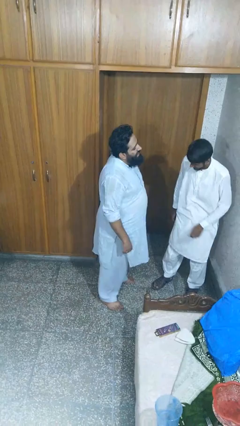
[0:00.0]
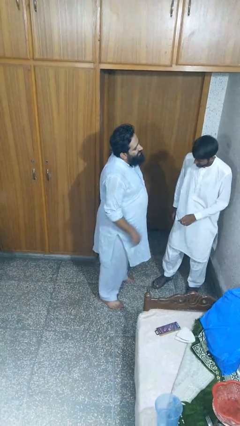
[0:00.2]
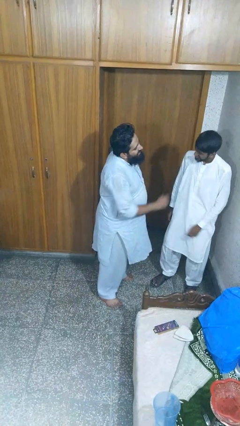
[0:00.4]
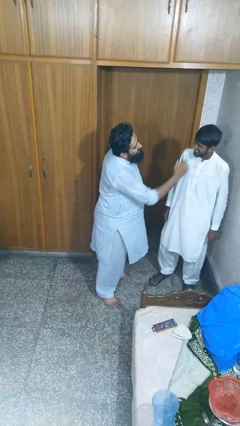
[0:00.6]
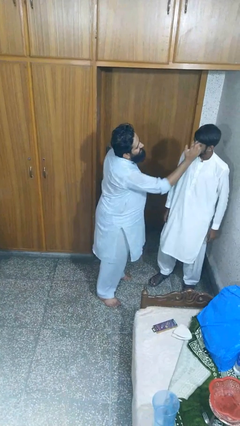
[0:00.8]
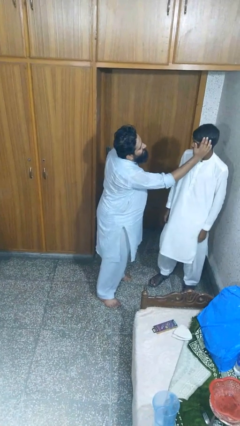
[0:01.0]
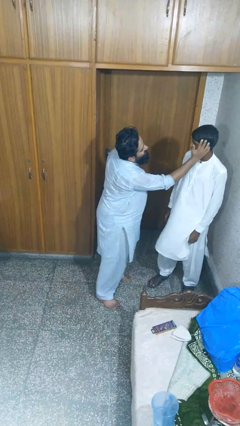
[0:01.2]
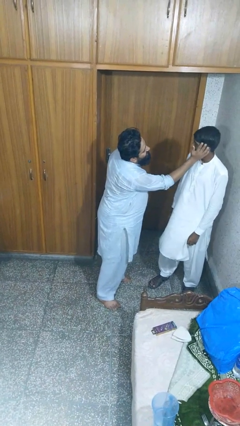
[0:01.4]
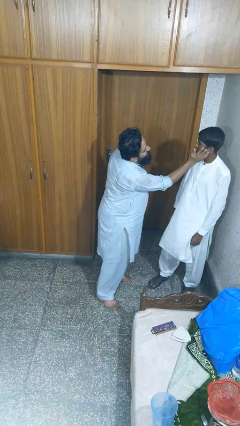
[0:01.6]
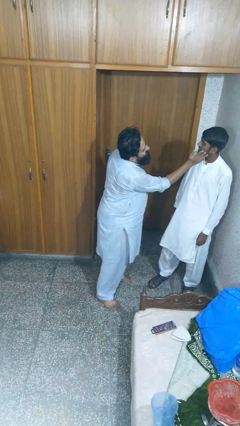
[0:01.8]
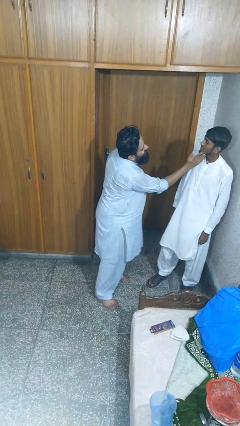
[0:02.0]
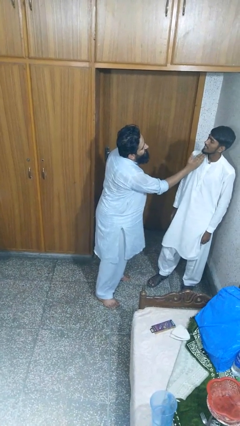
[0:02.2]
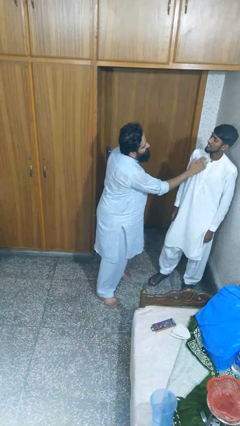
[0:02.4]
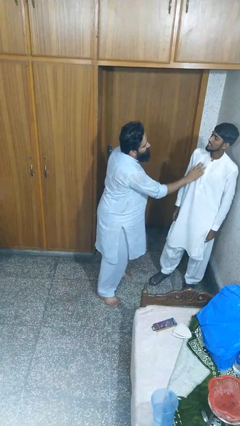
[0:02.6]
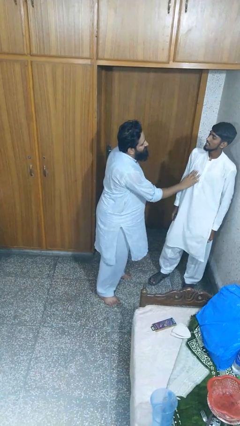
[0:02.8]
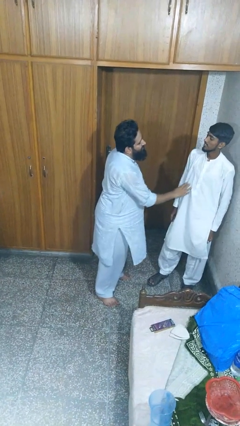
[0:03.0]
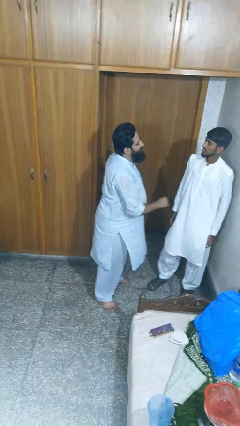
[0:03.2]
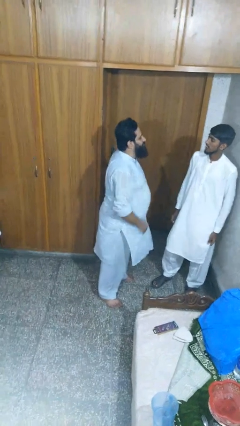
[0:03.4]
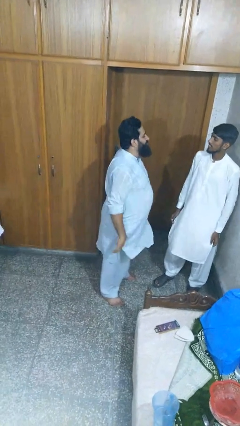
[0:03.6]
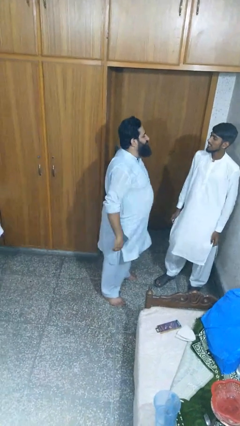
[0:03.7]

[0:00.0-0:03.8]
person touches face of person

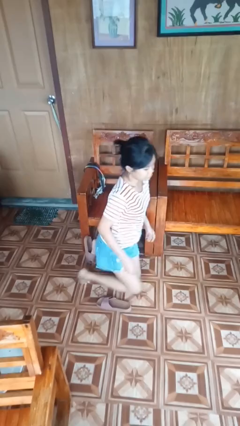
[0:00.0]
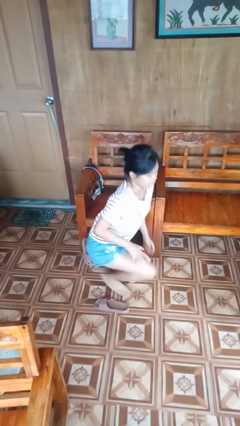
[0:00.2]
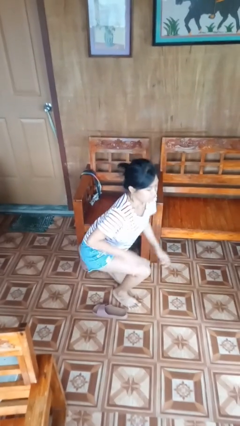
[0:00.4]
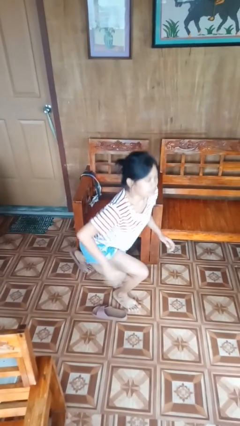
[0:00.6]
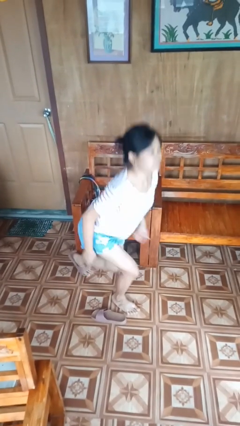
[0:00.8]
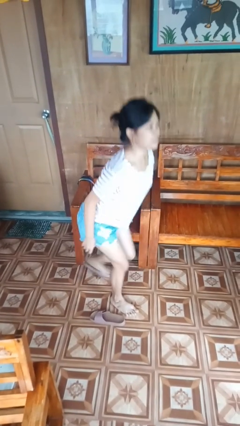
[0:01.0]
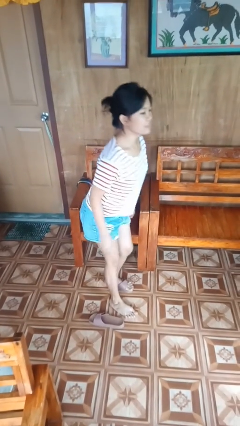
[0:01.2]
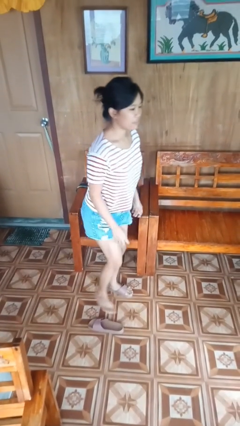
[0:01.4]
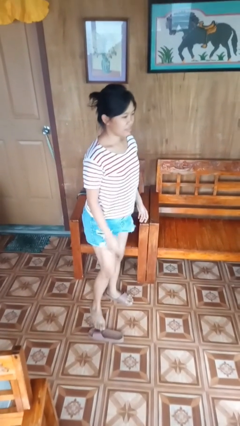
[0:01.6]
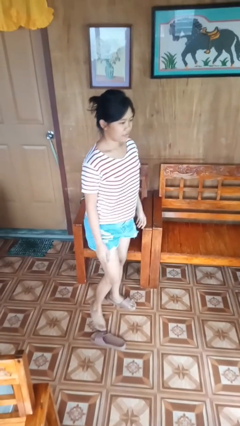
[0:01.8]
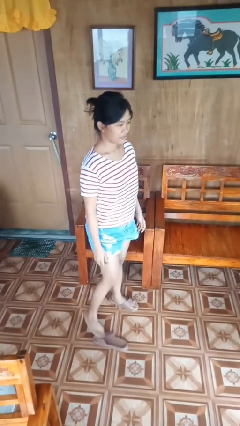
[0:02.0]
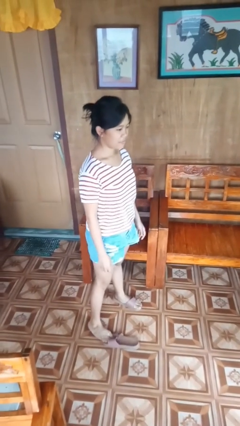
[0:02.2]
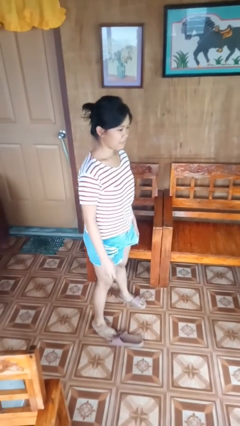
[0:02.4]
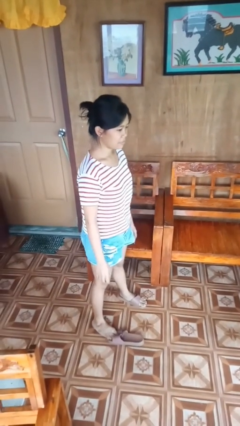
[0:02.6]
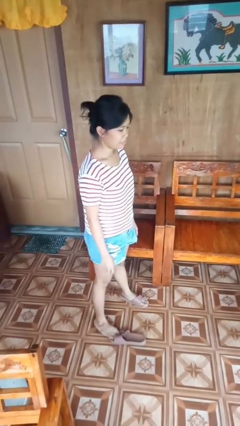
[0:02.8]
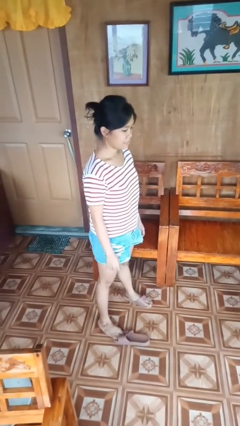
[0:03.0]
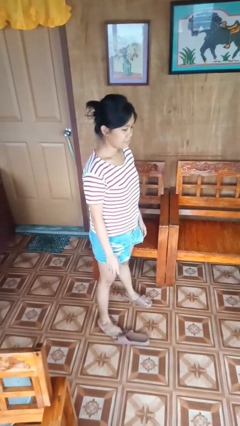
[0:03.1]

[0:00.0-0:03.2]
person stands up from floor

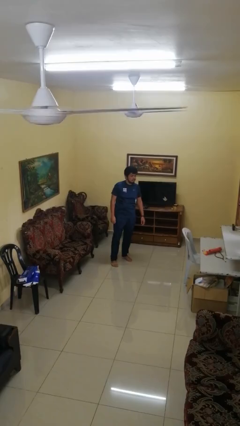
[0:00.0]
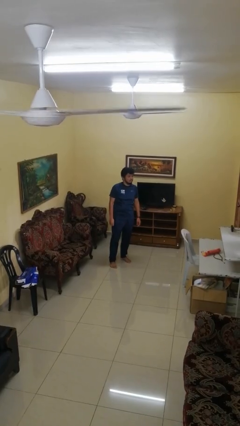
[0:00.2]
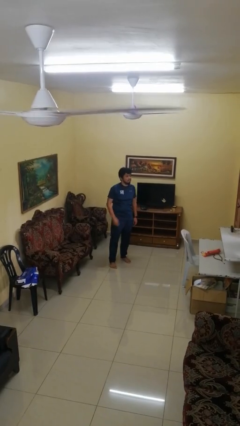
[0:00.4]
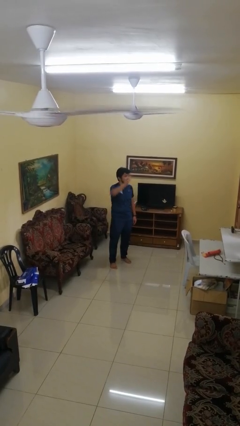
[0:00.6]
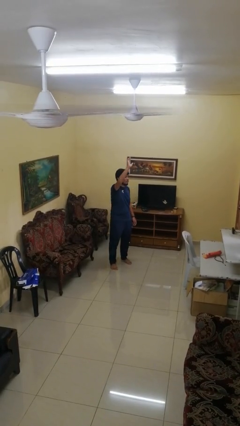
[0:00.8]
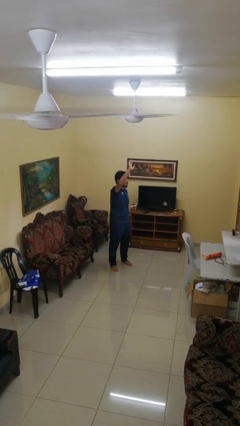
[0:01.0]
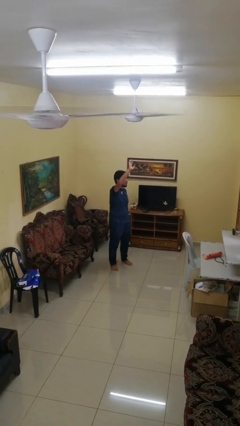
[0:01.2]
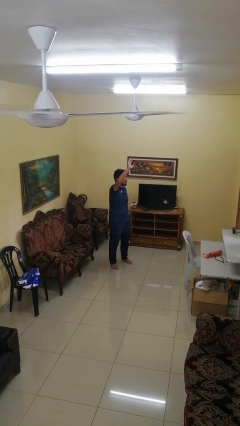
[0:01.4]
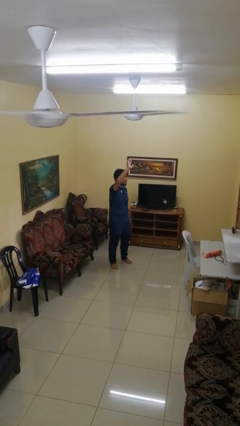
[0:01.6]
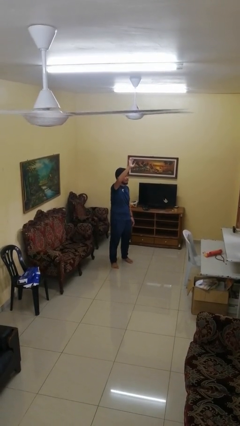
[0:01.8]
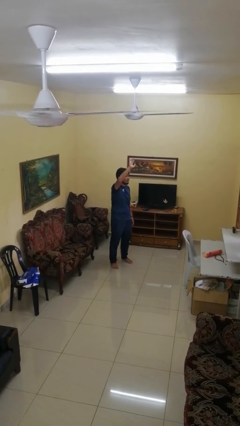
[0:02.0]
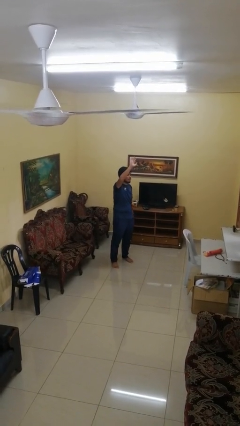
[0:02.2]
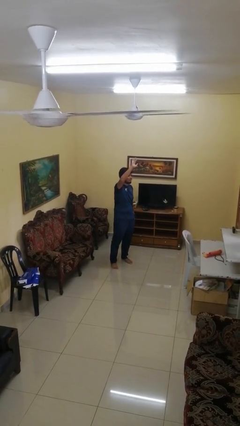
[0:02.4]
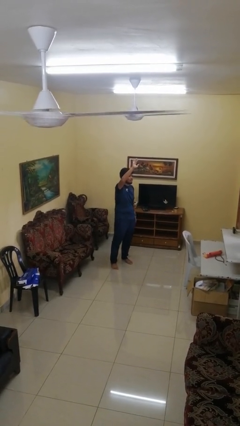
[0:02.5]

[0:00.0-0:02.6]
person gestures raise hand

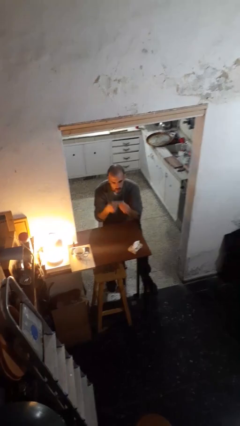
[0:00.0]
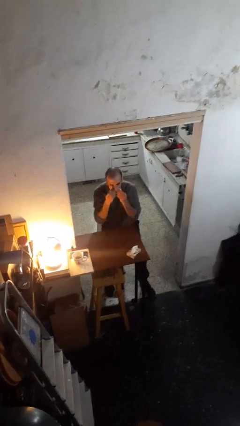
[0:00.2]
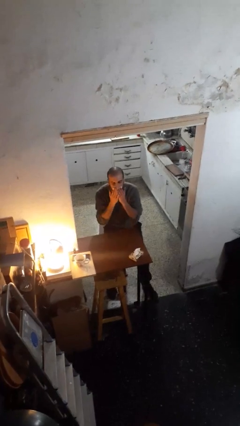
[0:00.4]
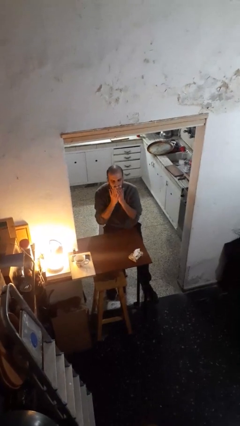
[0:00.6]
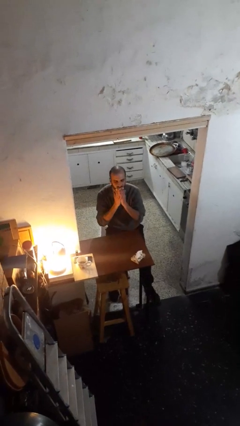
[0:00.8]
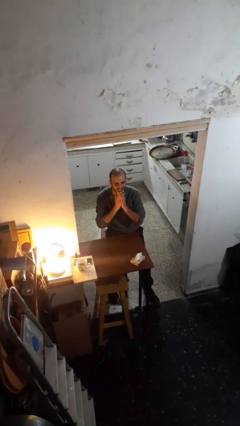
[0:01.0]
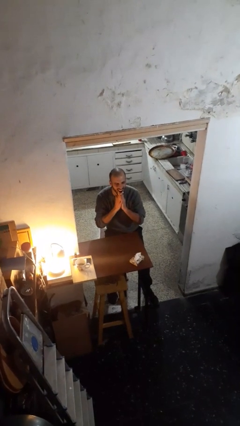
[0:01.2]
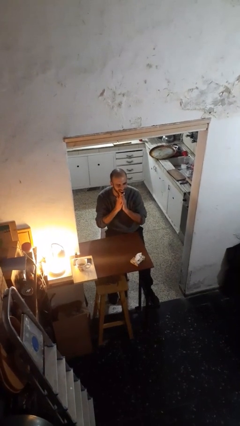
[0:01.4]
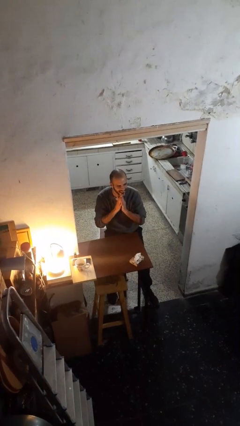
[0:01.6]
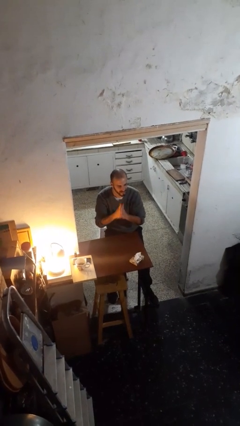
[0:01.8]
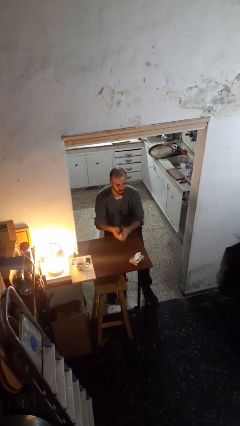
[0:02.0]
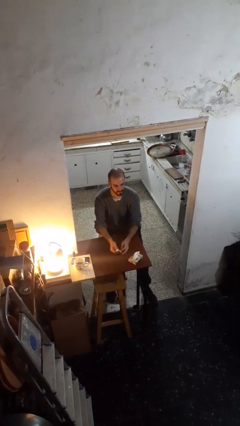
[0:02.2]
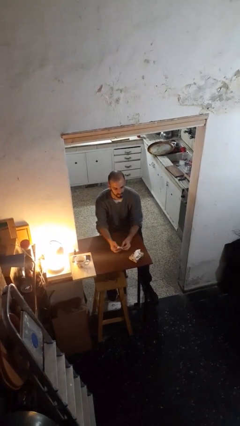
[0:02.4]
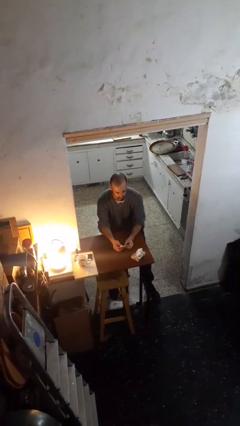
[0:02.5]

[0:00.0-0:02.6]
person wipes mouth with napkin

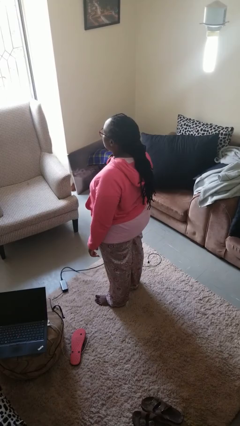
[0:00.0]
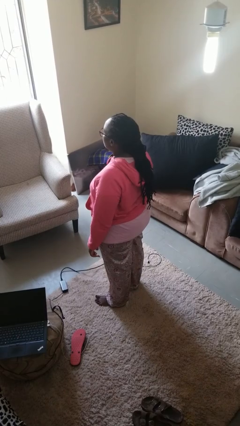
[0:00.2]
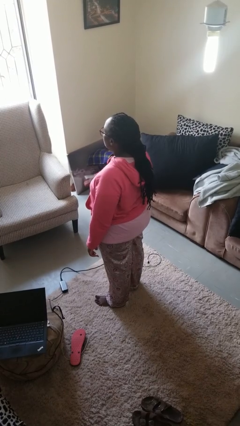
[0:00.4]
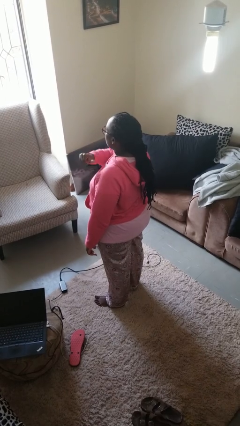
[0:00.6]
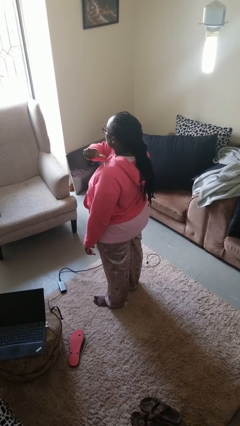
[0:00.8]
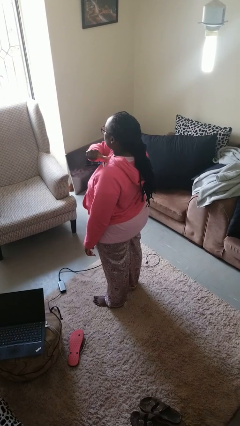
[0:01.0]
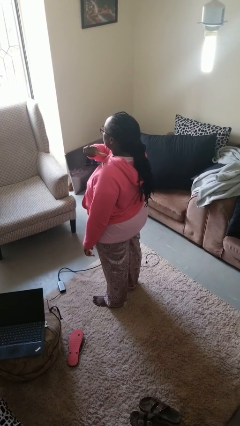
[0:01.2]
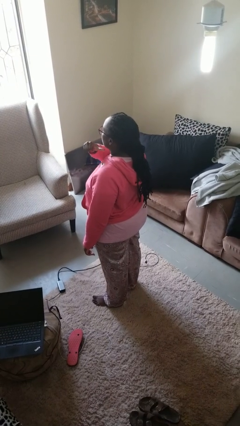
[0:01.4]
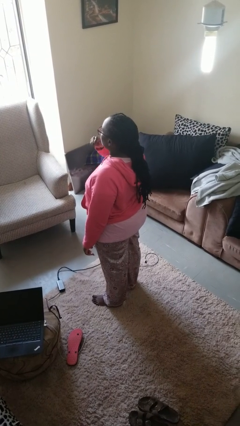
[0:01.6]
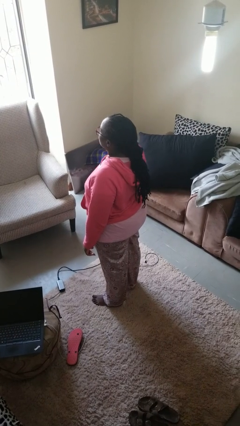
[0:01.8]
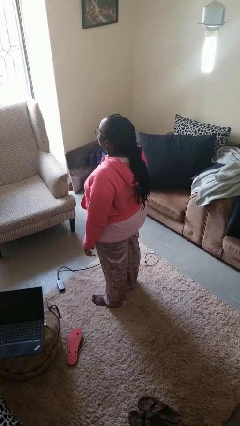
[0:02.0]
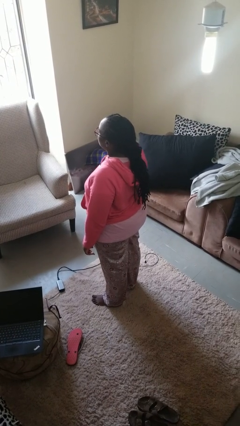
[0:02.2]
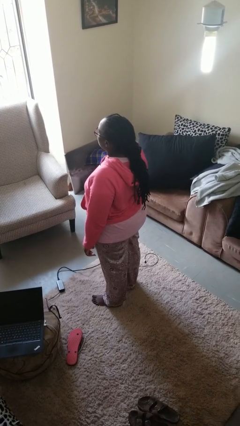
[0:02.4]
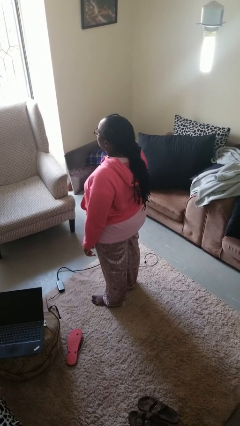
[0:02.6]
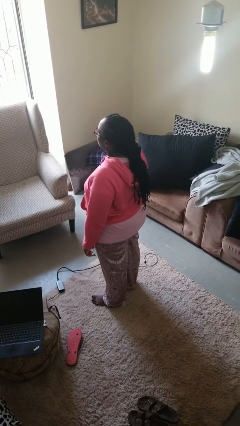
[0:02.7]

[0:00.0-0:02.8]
person gestures cut

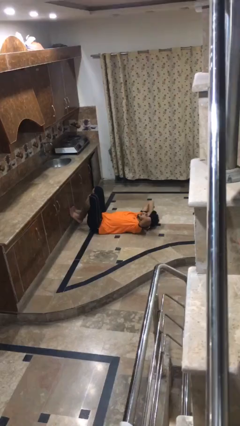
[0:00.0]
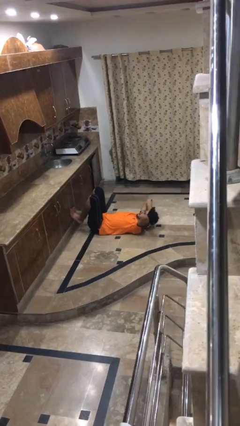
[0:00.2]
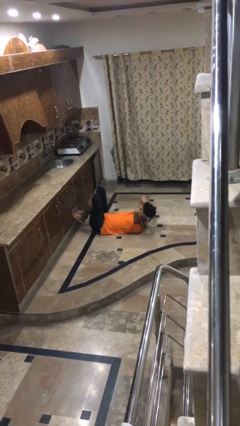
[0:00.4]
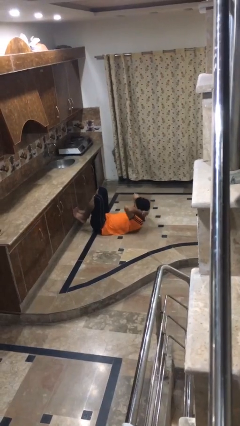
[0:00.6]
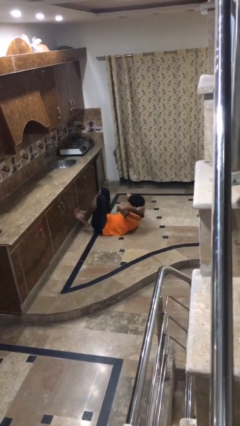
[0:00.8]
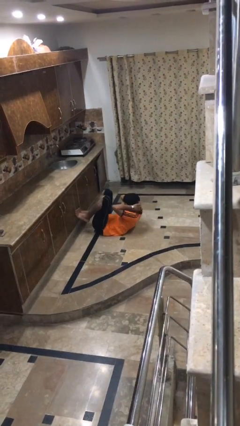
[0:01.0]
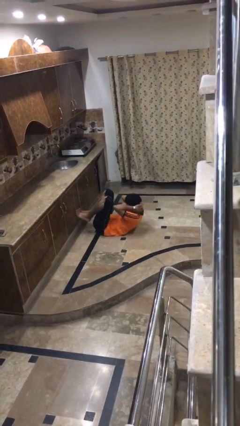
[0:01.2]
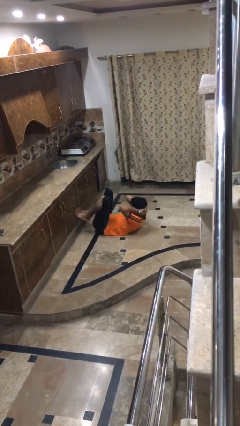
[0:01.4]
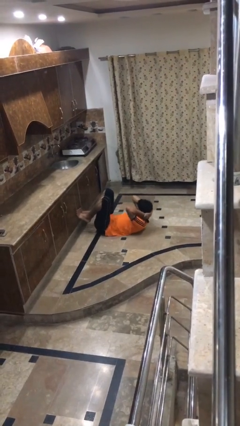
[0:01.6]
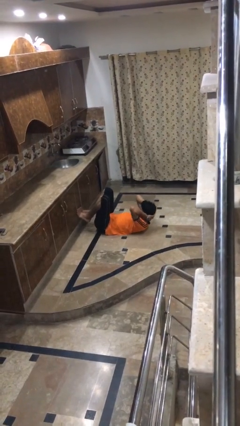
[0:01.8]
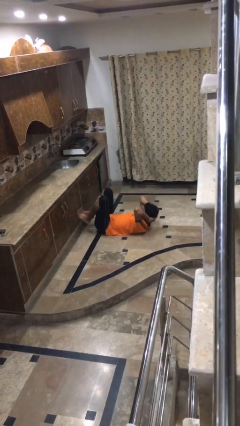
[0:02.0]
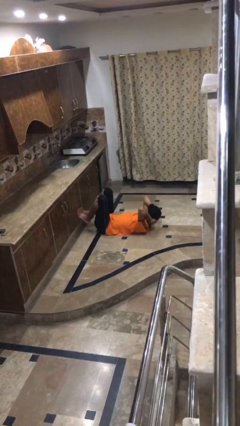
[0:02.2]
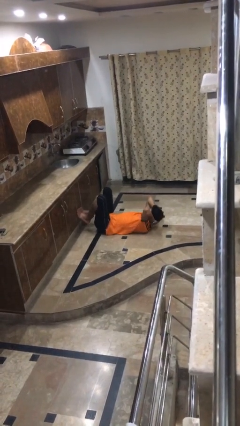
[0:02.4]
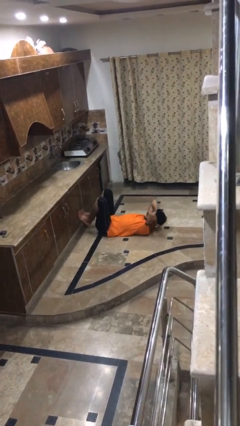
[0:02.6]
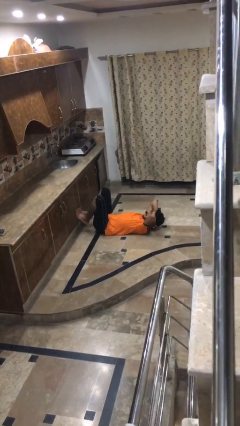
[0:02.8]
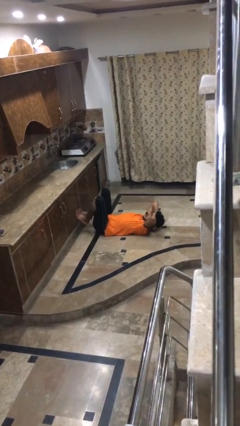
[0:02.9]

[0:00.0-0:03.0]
person exercises with situp
